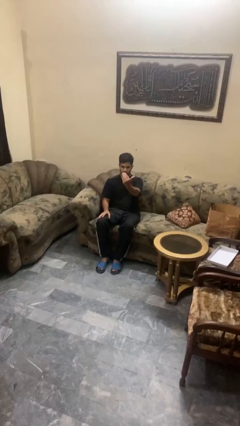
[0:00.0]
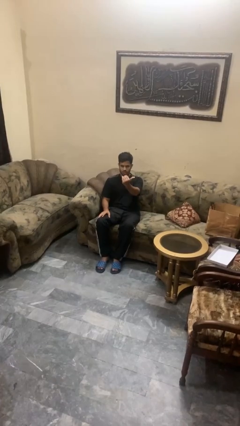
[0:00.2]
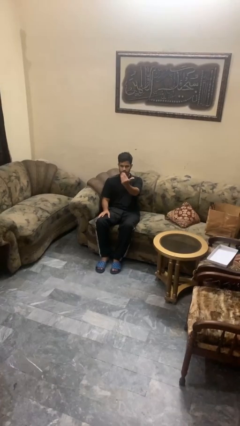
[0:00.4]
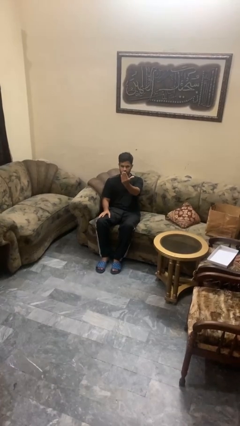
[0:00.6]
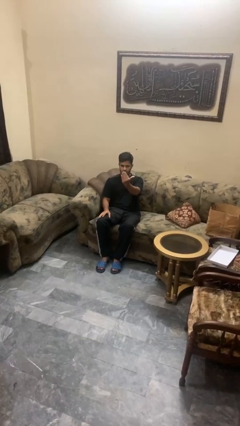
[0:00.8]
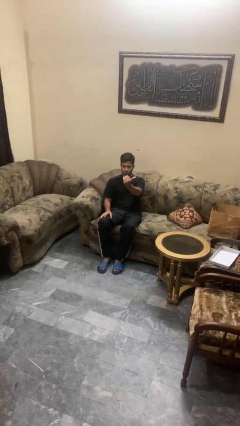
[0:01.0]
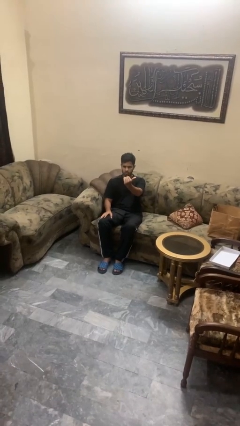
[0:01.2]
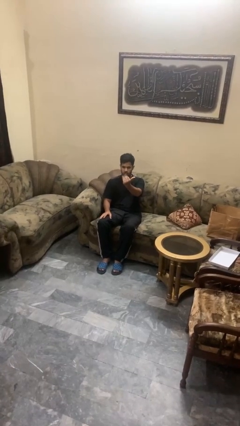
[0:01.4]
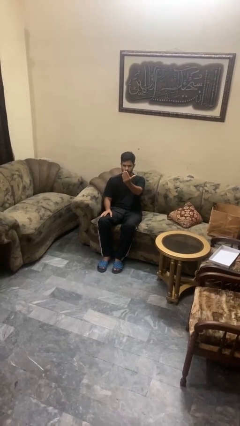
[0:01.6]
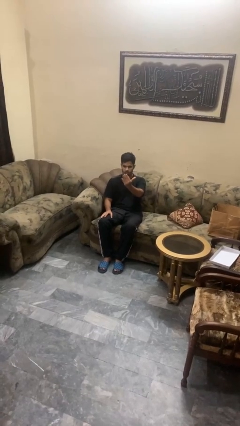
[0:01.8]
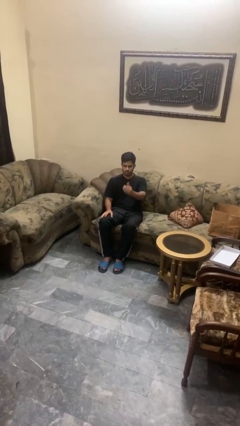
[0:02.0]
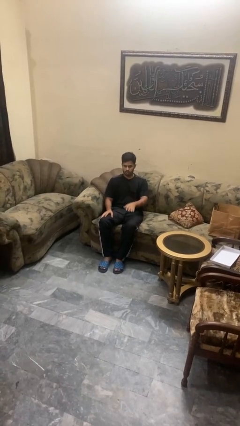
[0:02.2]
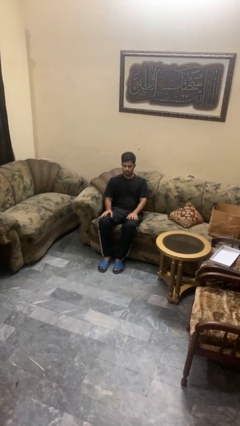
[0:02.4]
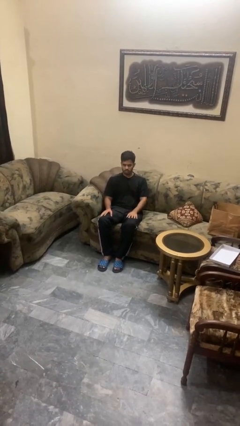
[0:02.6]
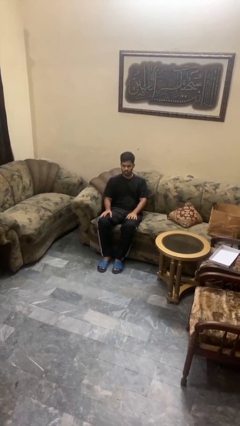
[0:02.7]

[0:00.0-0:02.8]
person gestures come here

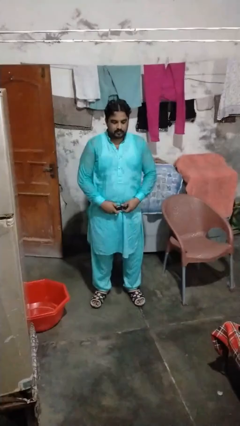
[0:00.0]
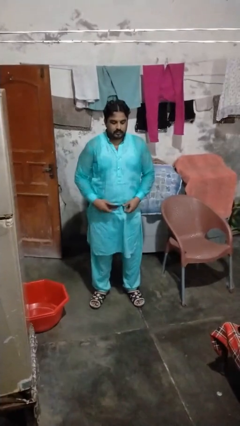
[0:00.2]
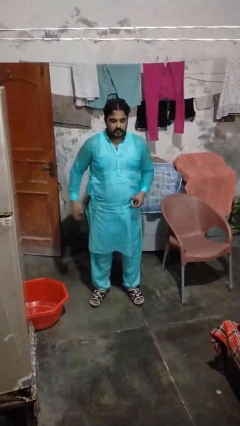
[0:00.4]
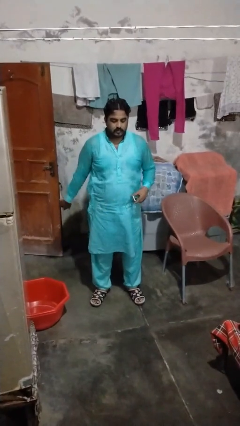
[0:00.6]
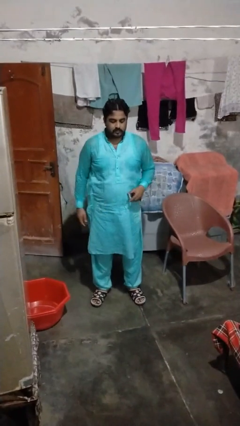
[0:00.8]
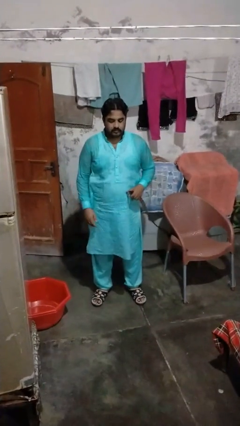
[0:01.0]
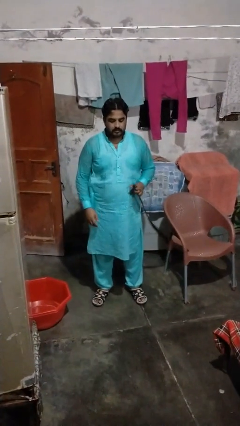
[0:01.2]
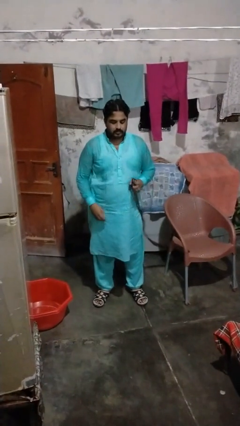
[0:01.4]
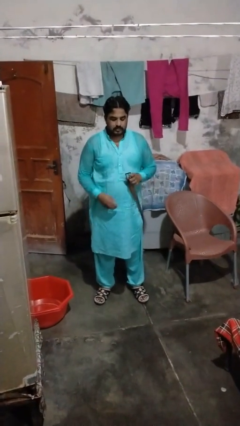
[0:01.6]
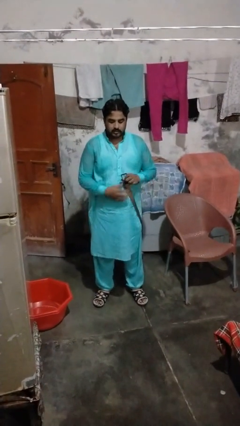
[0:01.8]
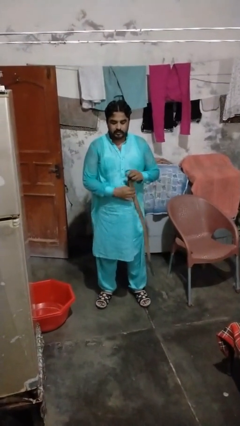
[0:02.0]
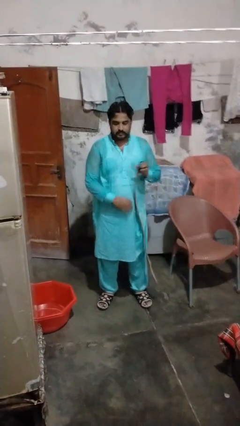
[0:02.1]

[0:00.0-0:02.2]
person takes off belt

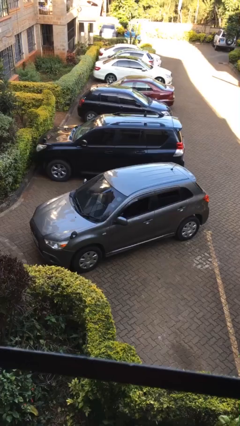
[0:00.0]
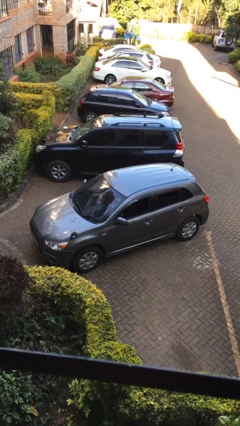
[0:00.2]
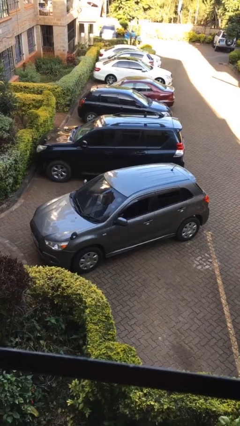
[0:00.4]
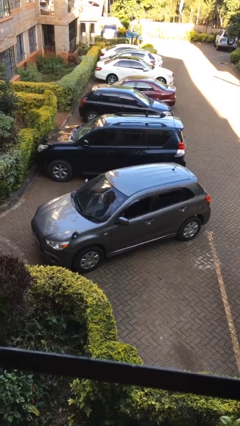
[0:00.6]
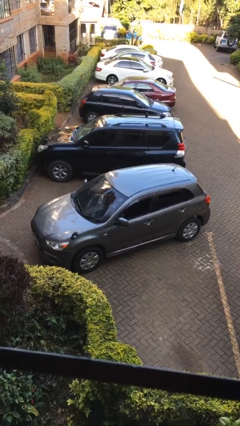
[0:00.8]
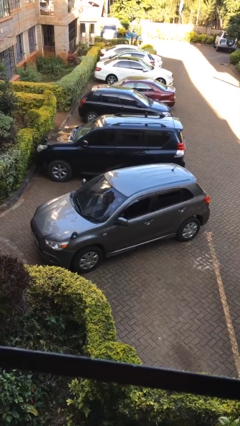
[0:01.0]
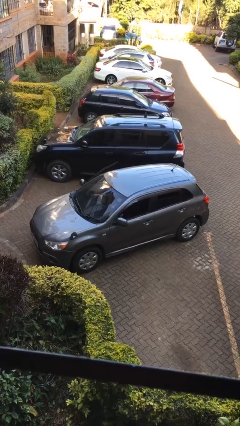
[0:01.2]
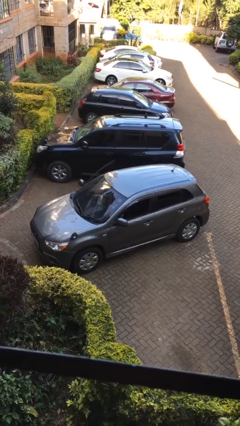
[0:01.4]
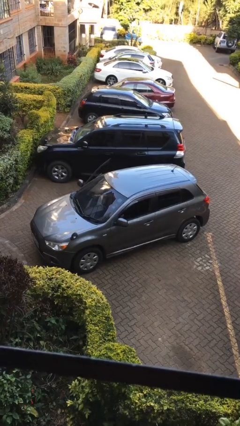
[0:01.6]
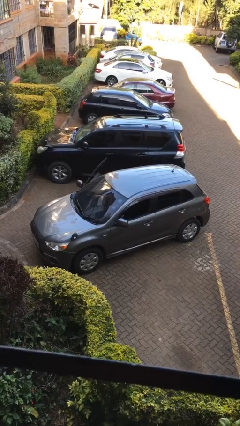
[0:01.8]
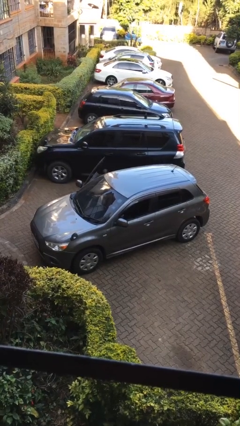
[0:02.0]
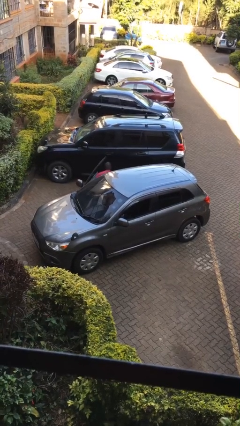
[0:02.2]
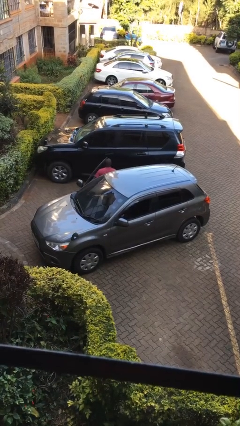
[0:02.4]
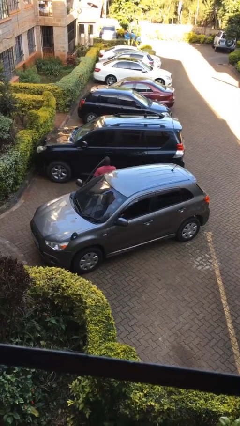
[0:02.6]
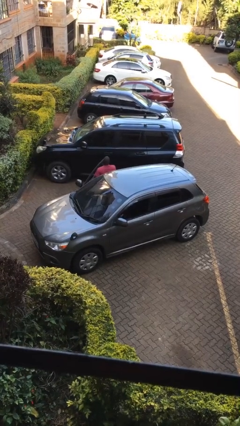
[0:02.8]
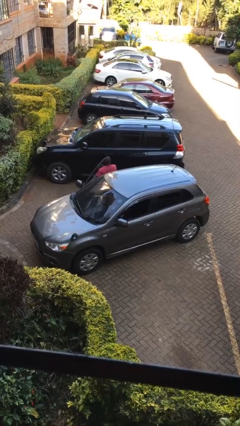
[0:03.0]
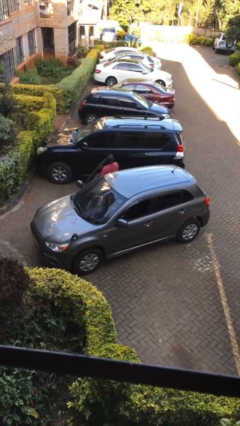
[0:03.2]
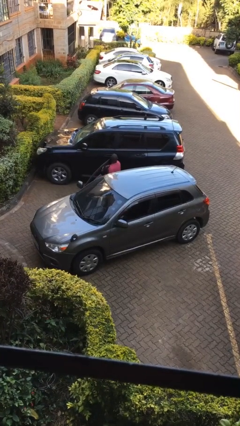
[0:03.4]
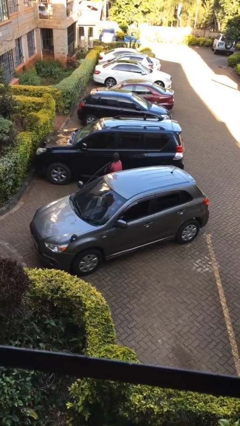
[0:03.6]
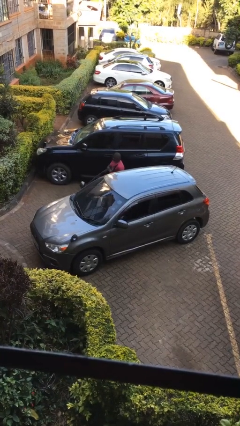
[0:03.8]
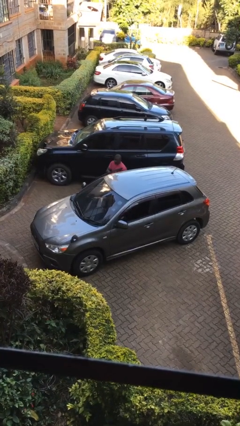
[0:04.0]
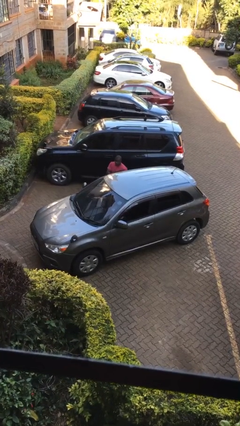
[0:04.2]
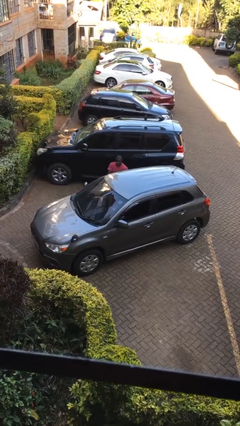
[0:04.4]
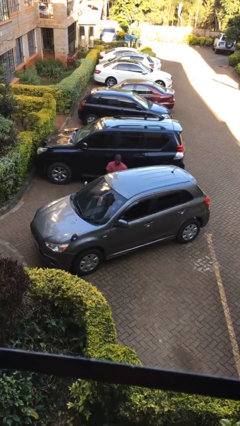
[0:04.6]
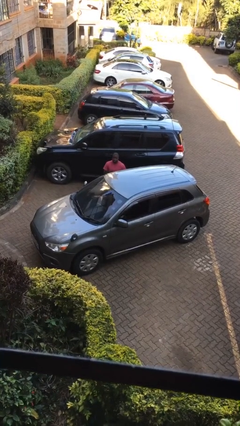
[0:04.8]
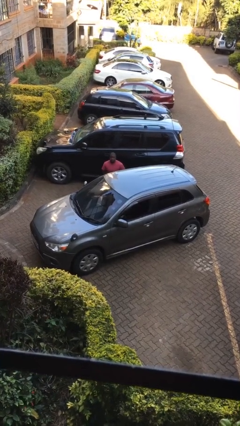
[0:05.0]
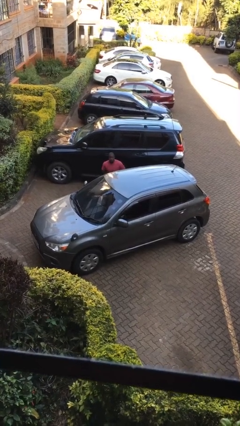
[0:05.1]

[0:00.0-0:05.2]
car drops off person

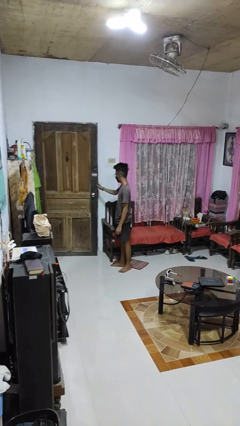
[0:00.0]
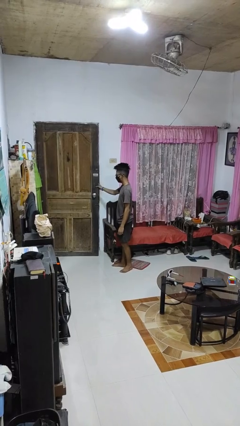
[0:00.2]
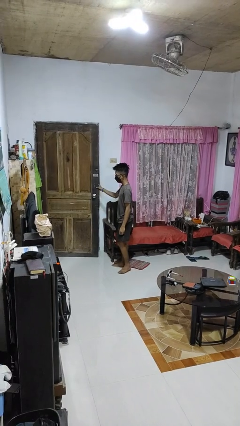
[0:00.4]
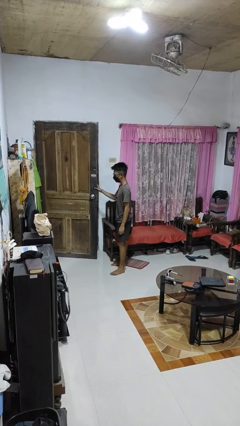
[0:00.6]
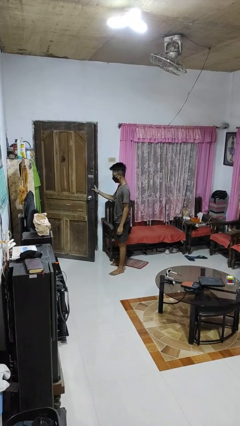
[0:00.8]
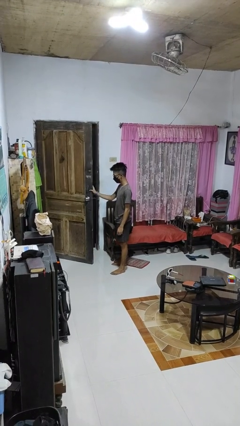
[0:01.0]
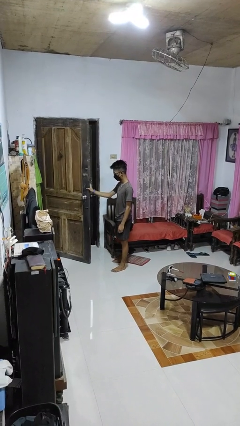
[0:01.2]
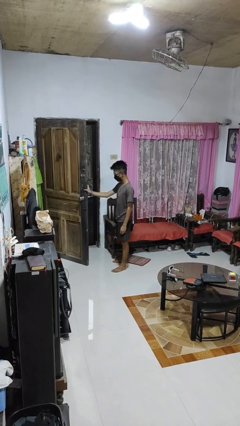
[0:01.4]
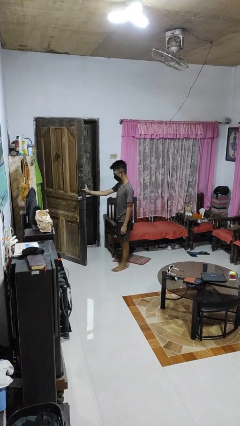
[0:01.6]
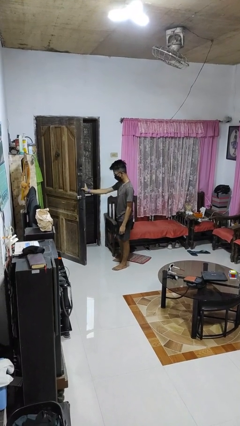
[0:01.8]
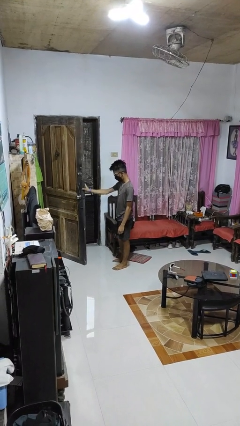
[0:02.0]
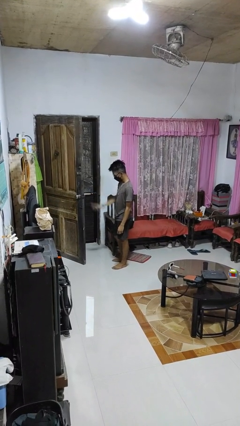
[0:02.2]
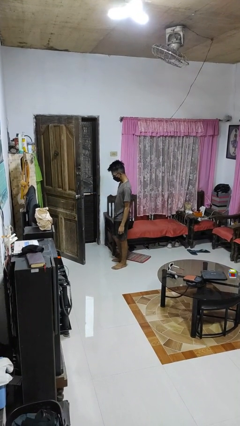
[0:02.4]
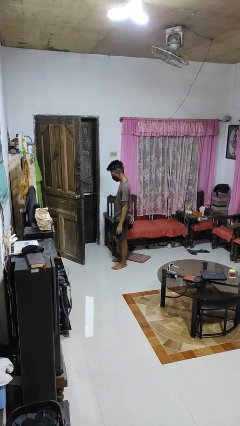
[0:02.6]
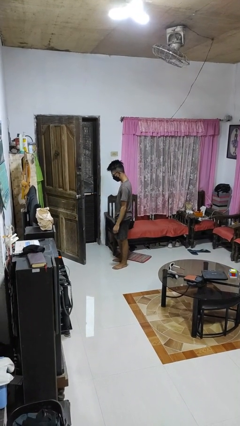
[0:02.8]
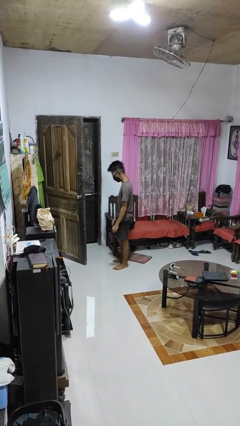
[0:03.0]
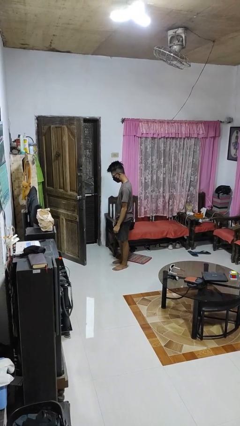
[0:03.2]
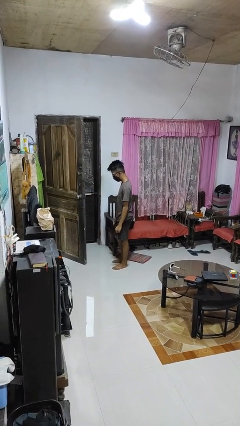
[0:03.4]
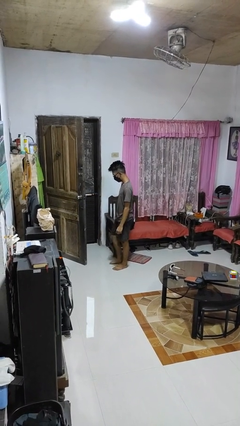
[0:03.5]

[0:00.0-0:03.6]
person opens facility door

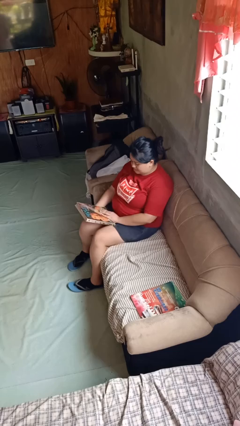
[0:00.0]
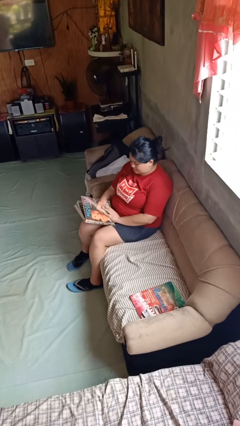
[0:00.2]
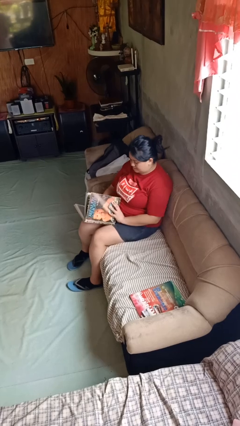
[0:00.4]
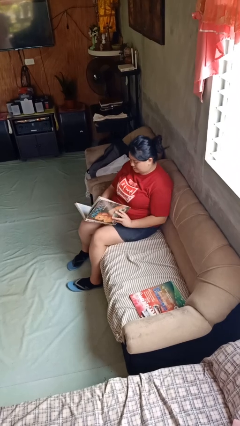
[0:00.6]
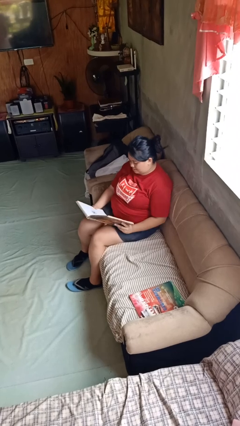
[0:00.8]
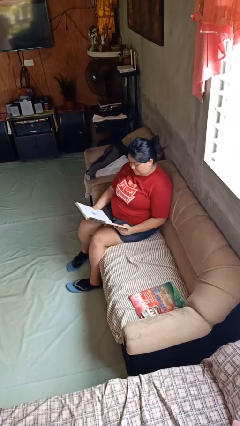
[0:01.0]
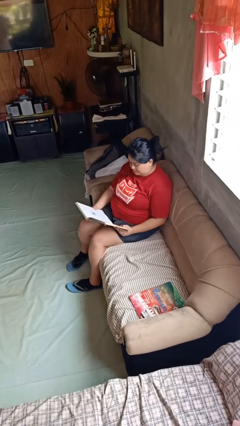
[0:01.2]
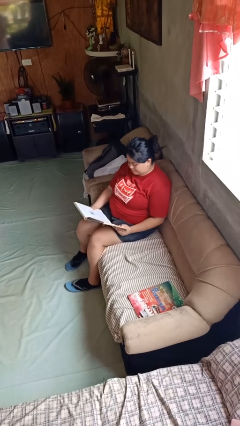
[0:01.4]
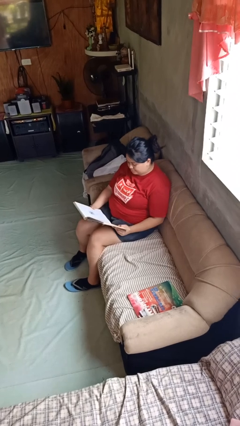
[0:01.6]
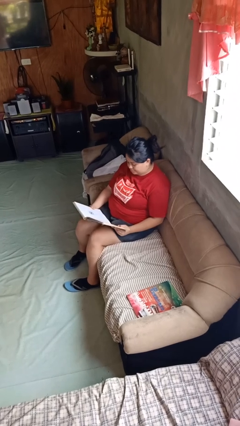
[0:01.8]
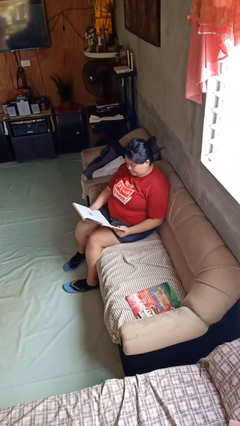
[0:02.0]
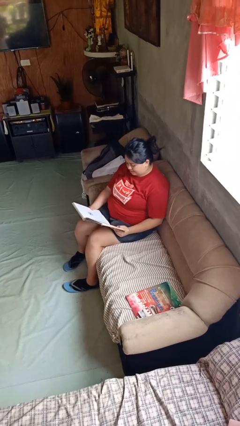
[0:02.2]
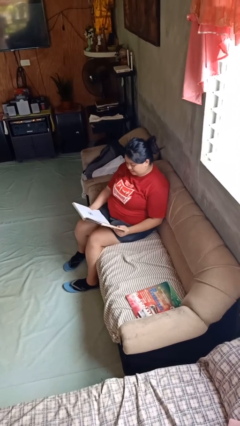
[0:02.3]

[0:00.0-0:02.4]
person reads book

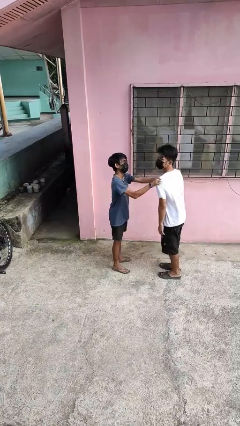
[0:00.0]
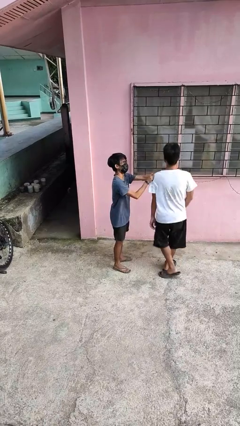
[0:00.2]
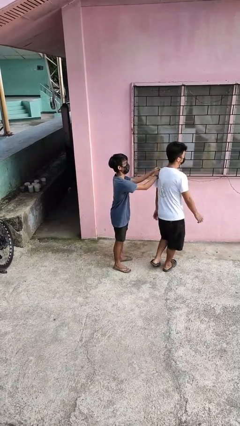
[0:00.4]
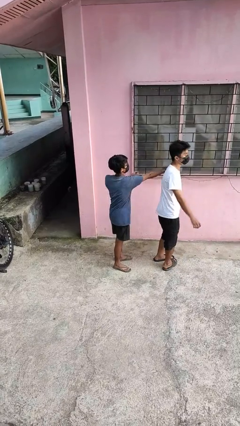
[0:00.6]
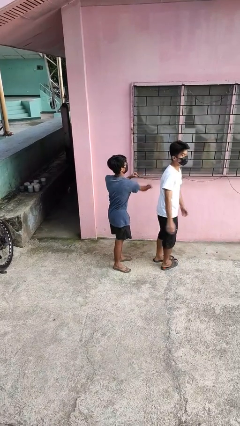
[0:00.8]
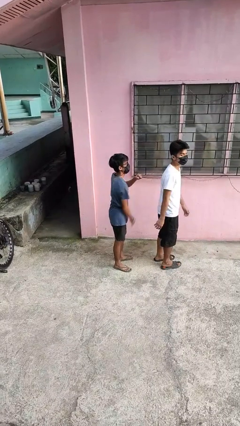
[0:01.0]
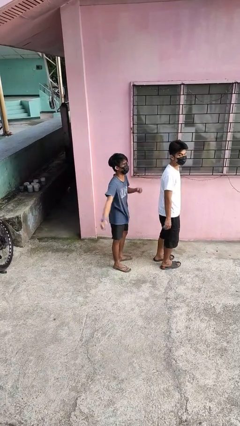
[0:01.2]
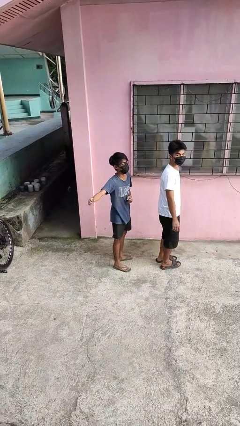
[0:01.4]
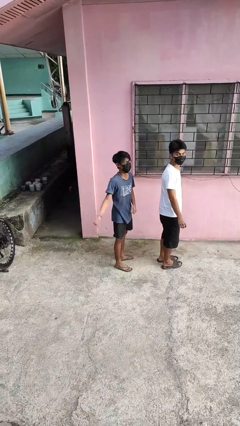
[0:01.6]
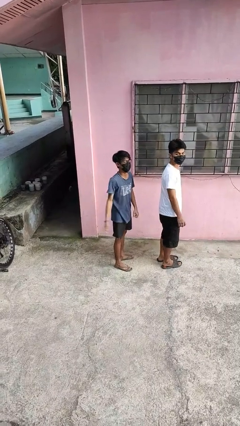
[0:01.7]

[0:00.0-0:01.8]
person spins person around
